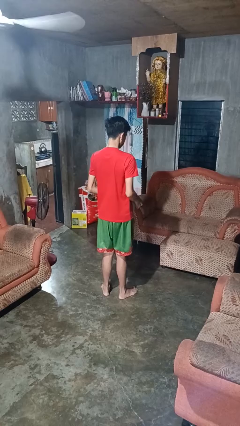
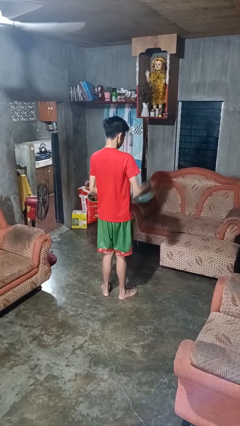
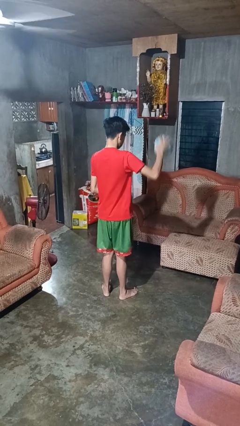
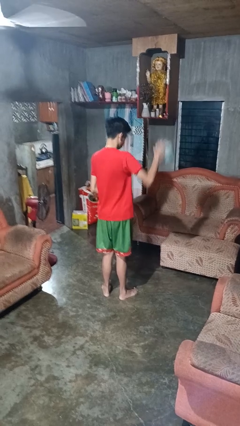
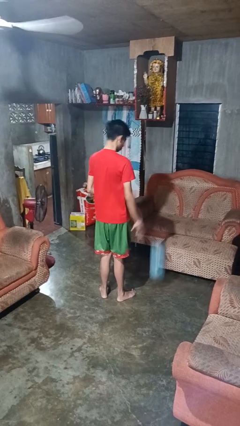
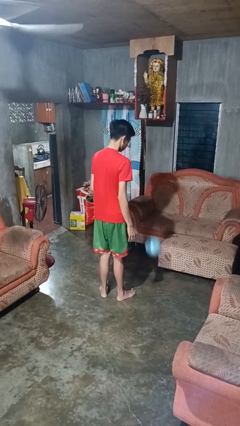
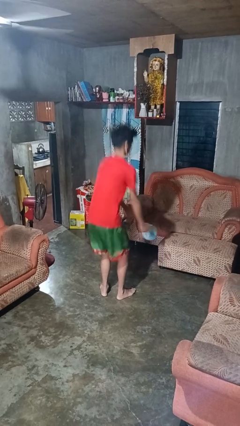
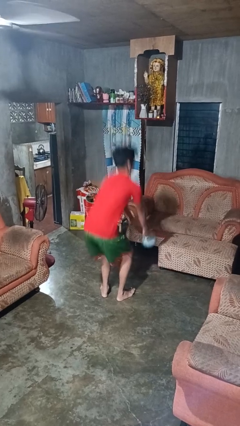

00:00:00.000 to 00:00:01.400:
person bounces ball on floor

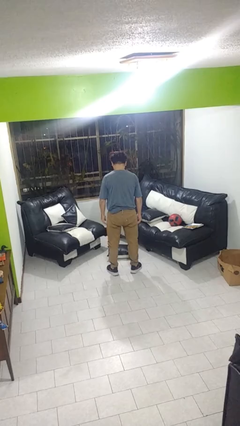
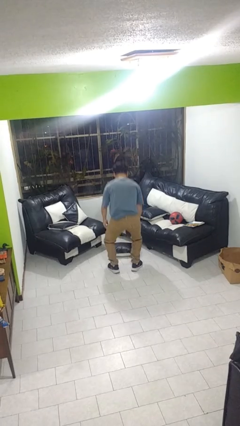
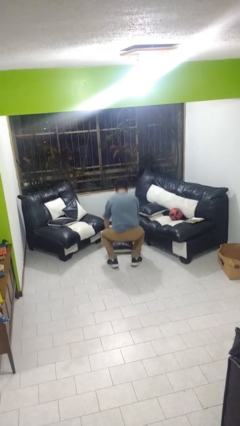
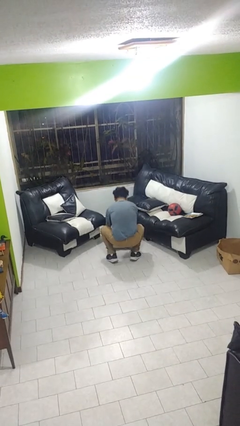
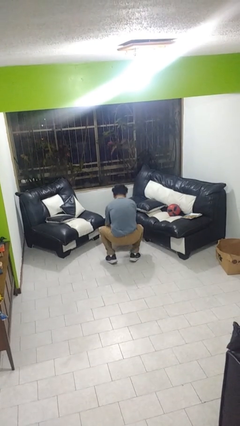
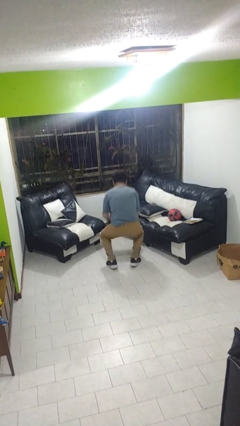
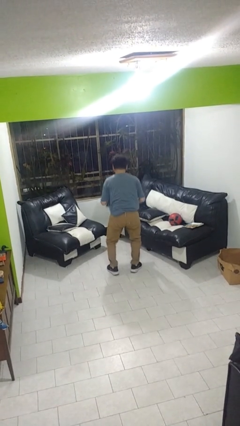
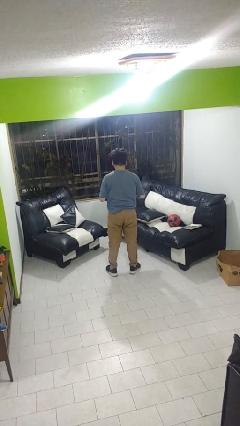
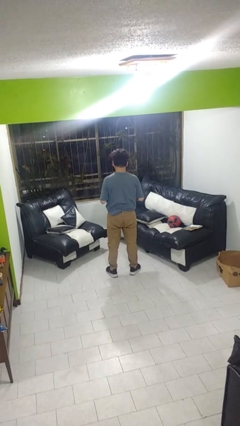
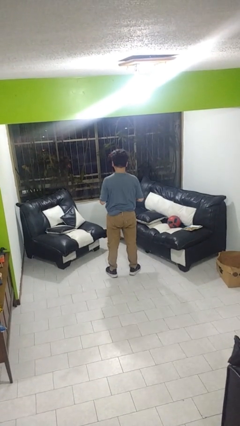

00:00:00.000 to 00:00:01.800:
person picks up object from floor

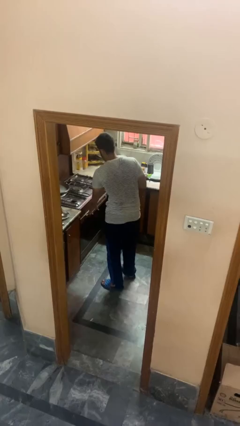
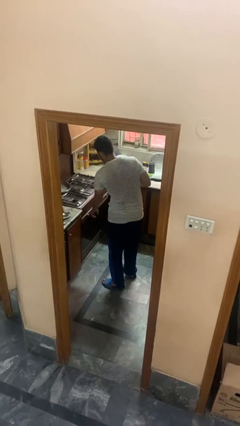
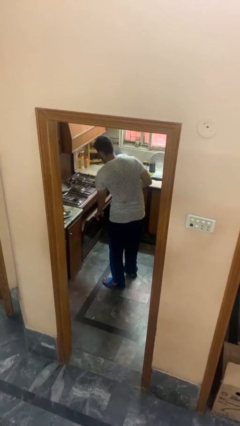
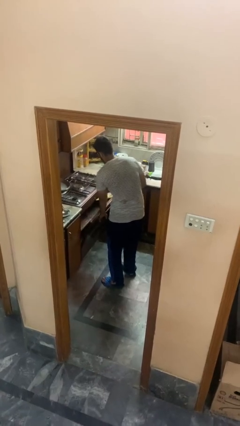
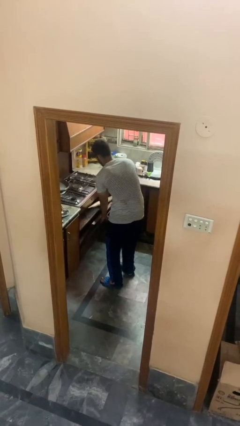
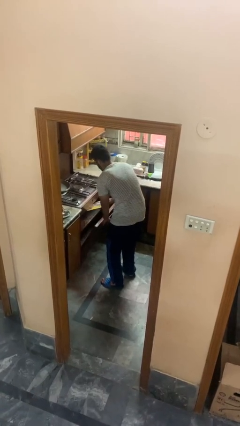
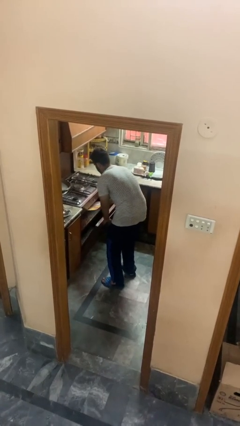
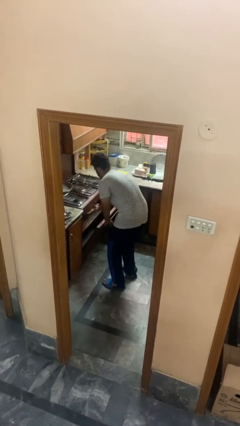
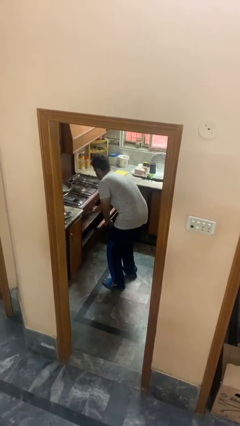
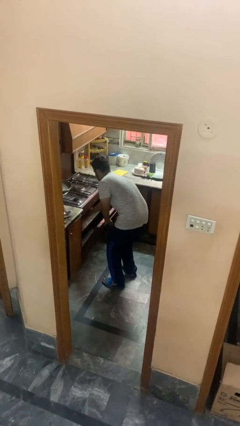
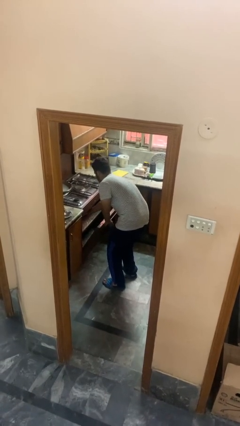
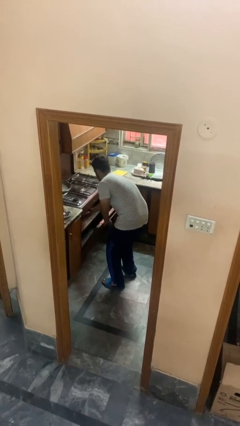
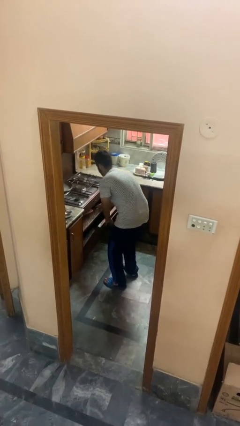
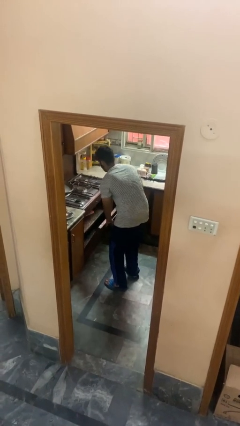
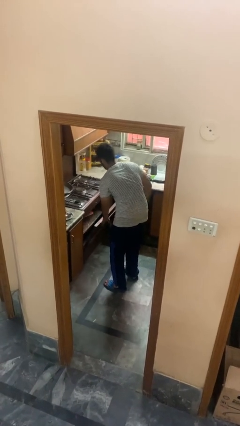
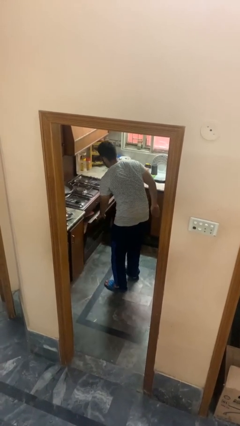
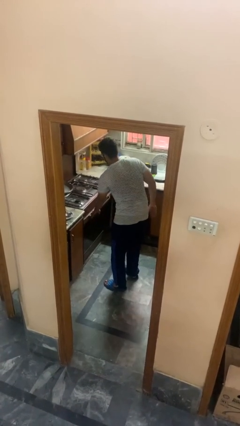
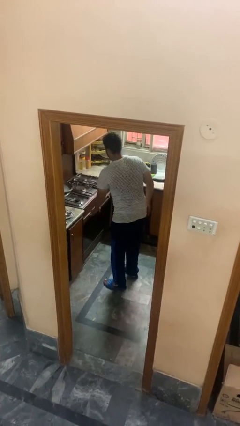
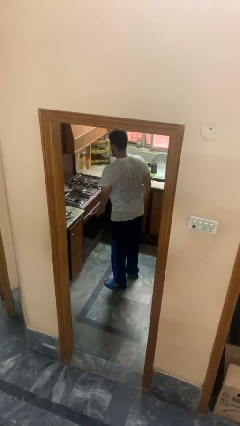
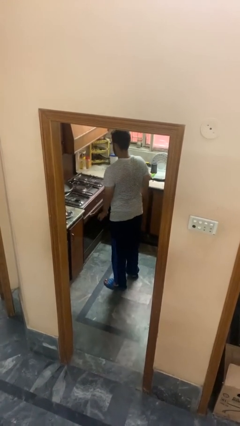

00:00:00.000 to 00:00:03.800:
person puts object into oven

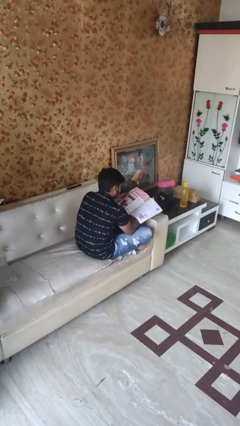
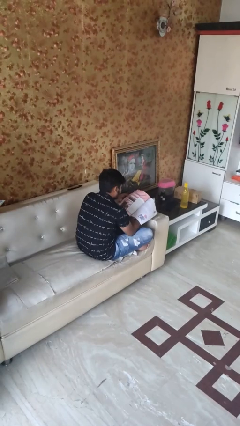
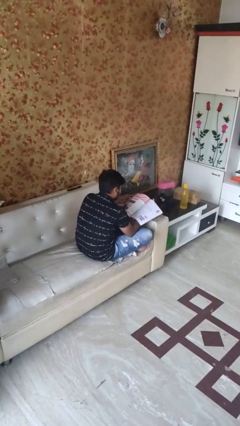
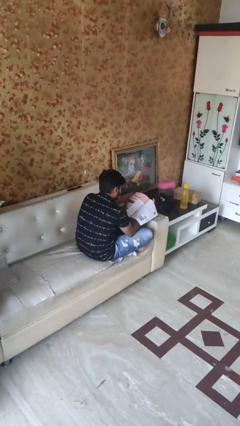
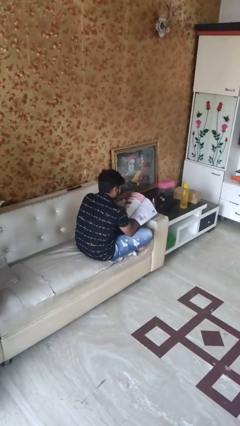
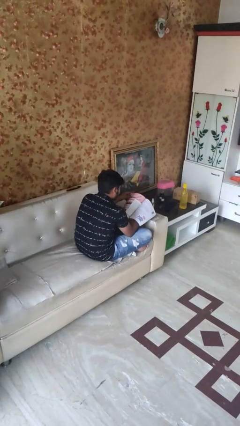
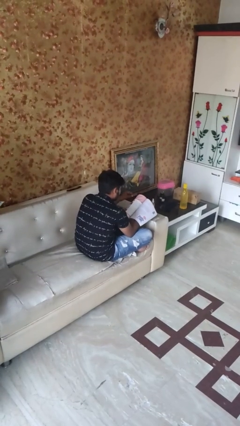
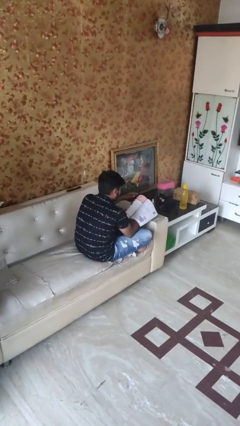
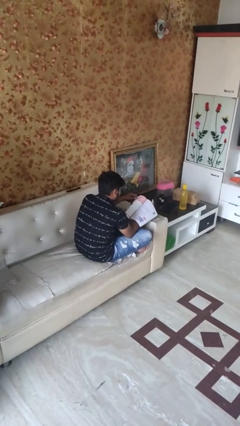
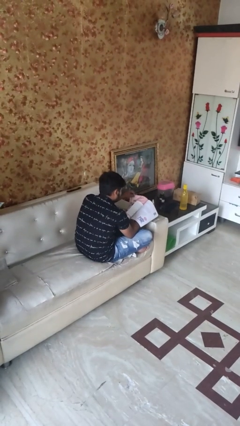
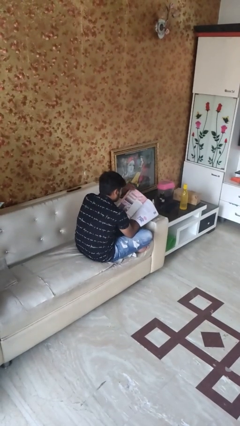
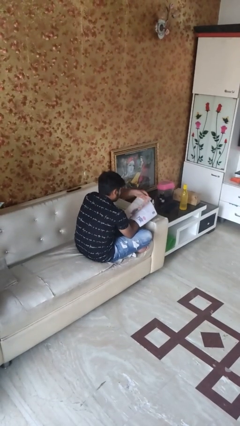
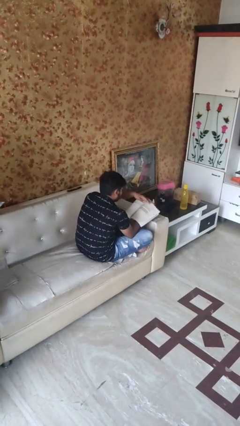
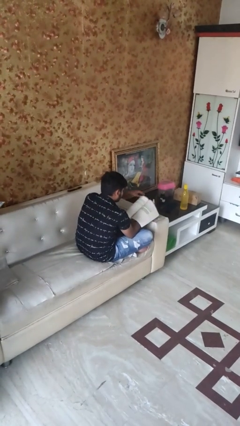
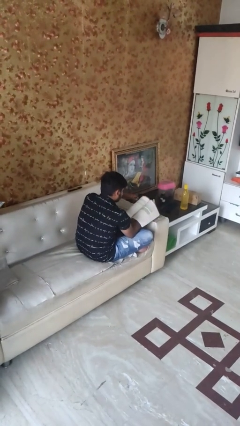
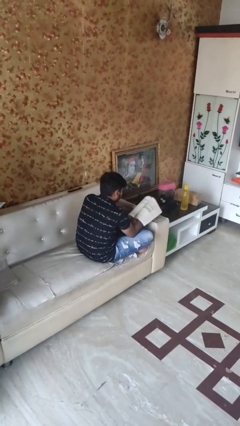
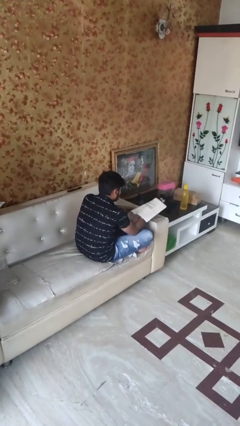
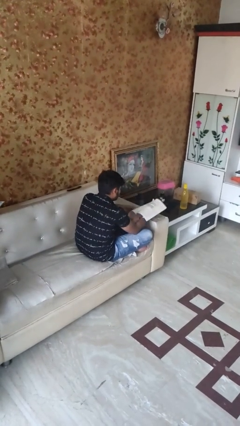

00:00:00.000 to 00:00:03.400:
person reads magazine

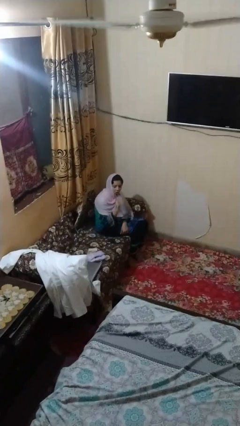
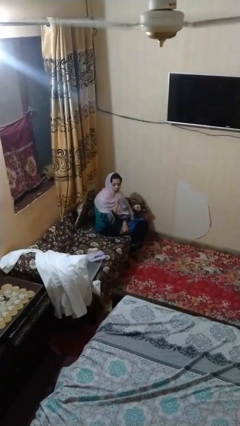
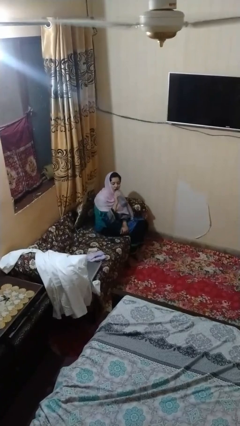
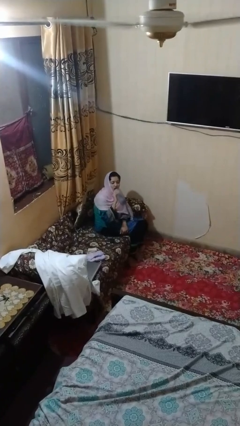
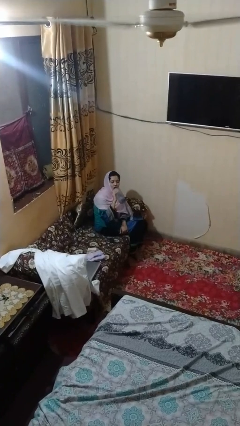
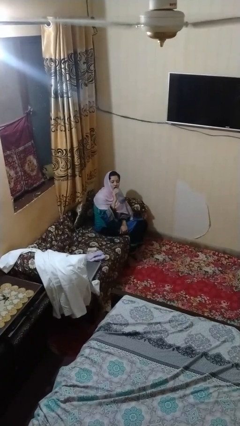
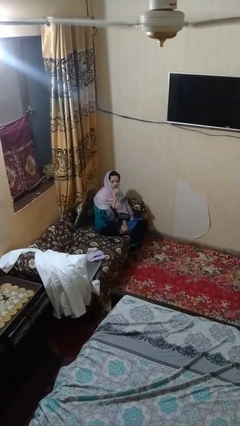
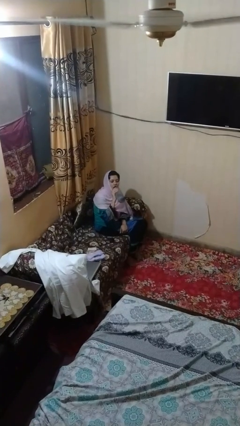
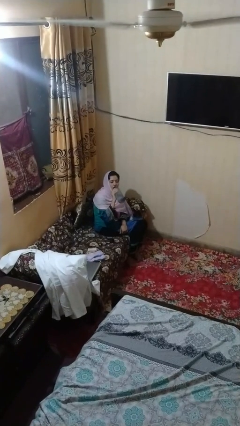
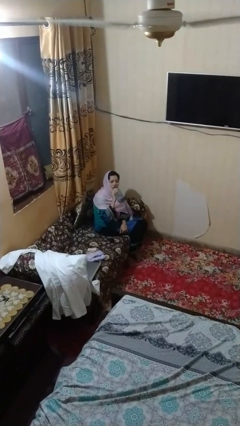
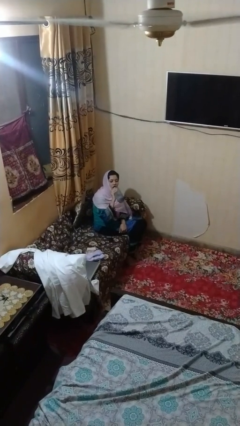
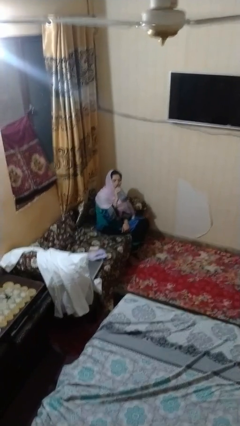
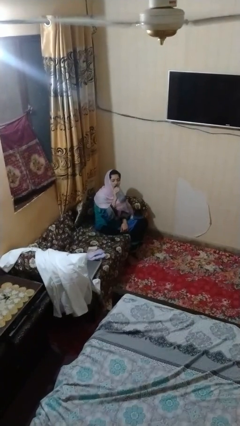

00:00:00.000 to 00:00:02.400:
person drinks from bottle

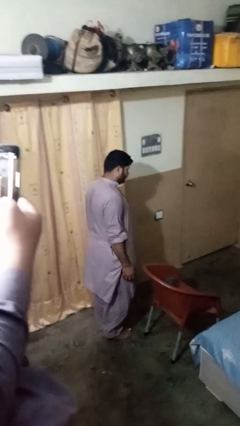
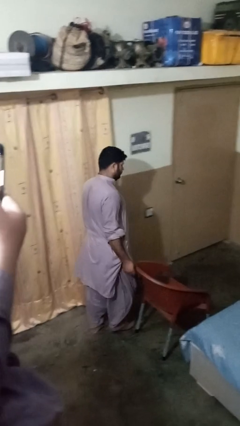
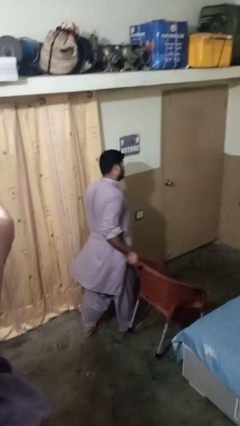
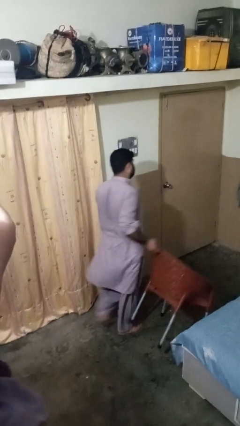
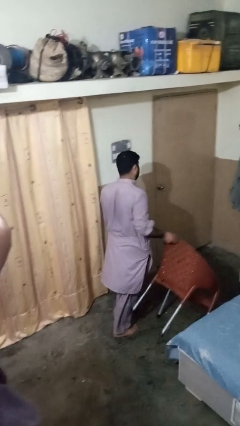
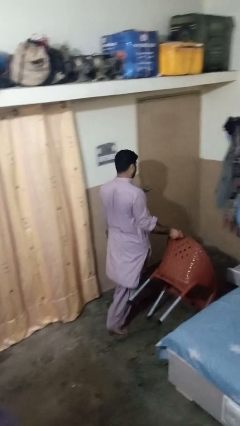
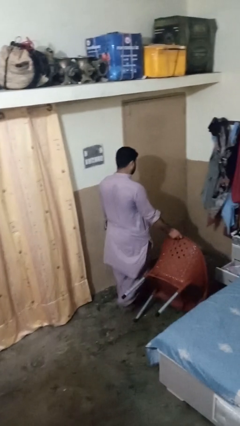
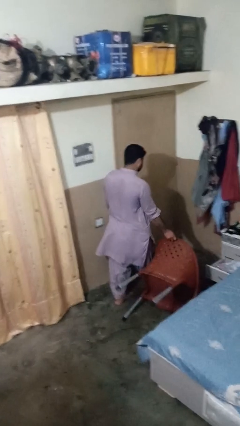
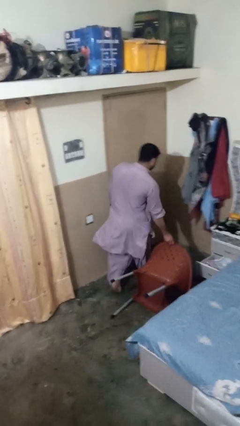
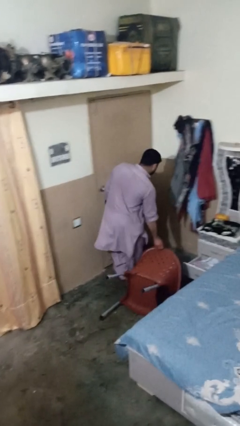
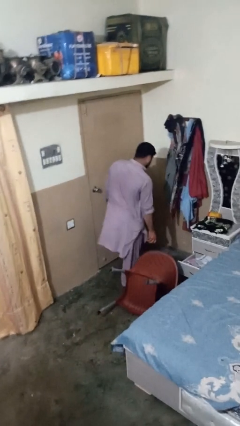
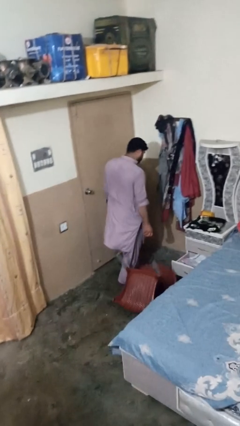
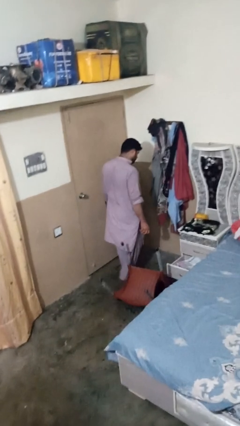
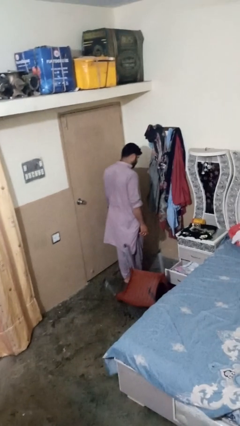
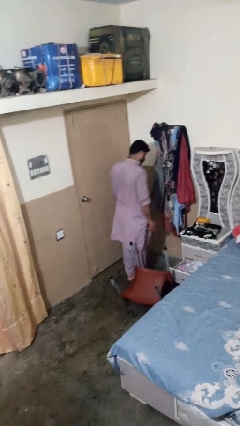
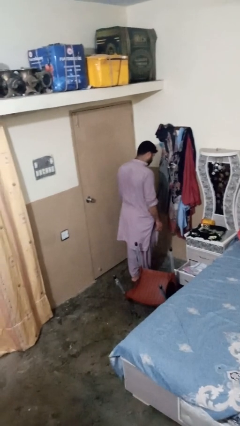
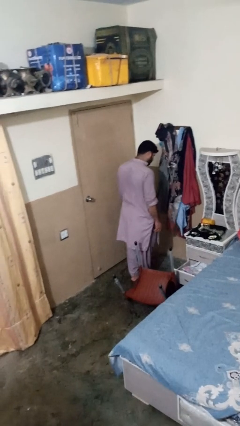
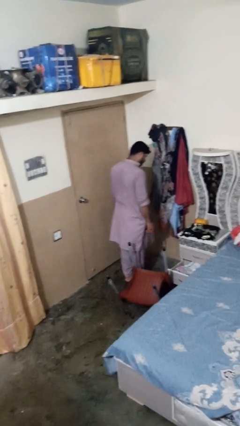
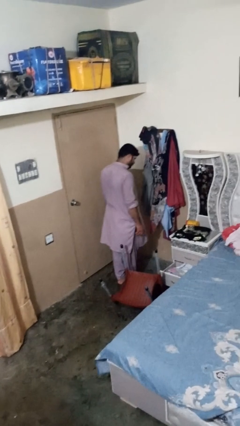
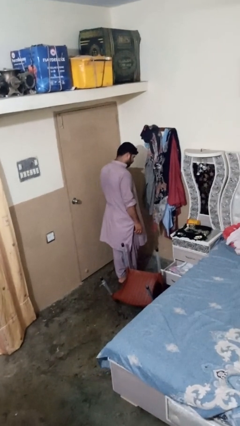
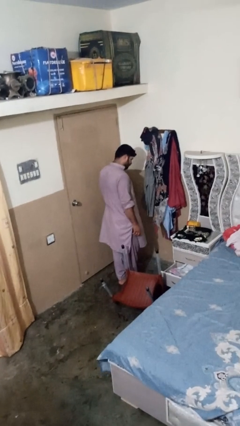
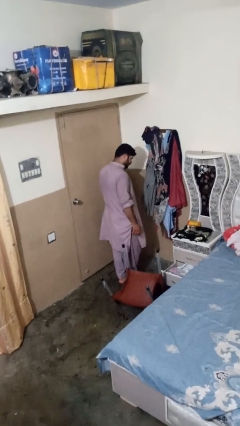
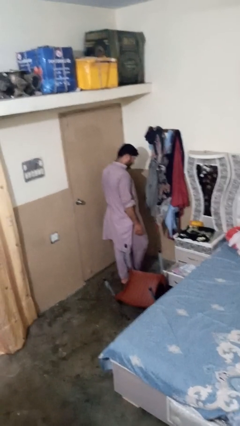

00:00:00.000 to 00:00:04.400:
person knocks over furniture
